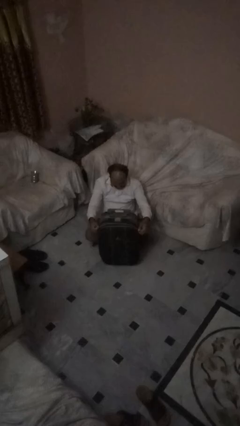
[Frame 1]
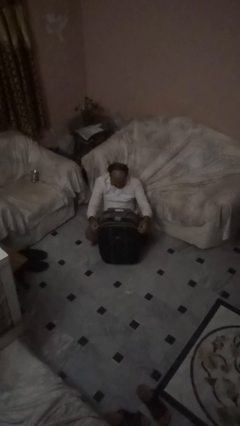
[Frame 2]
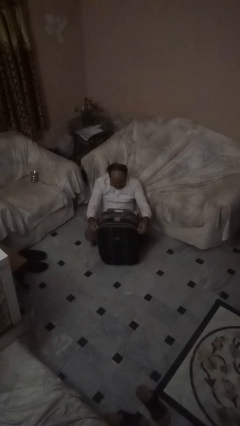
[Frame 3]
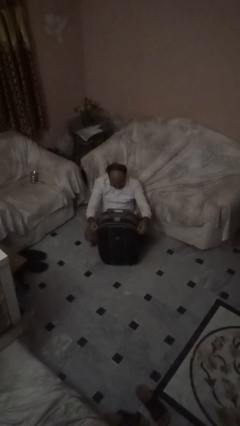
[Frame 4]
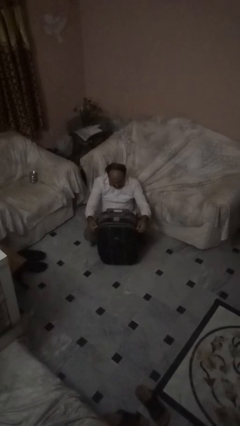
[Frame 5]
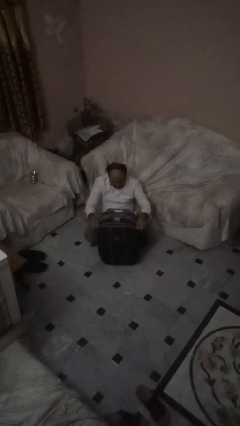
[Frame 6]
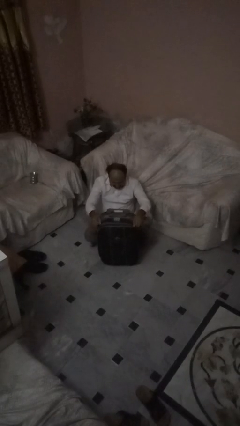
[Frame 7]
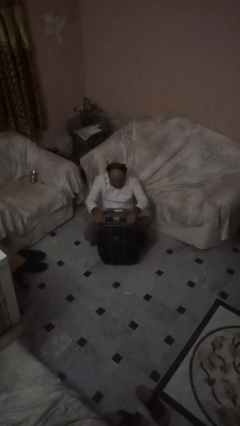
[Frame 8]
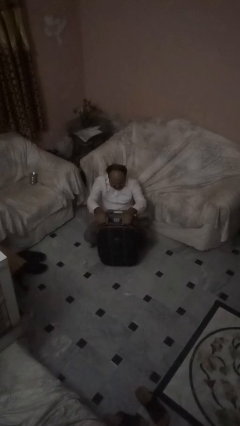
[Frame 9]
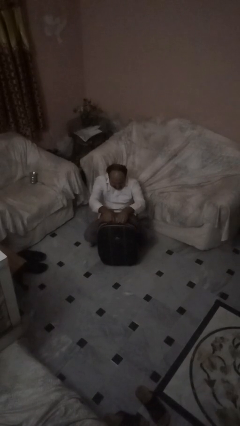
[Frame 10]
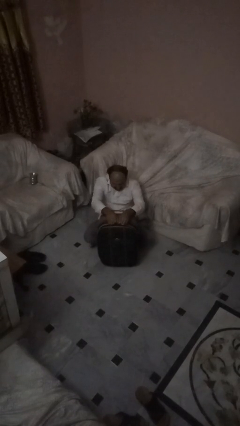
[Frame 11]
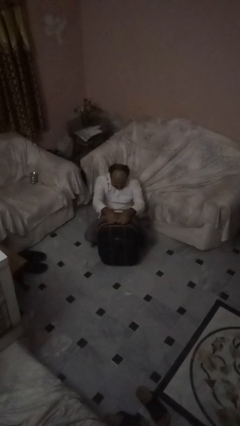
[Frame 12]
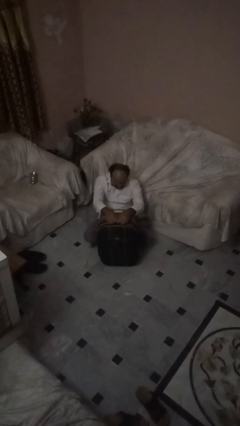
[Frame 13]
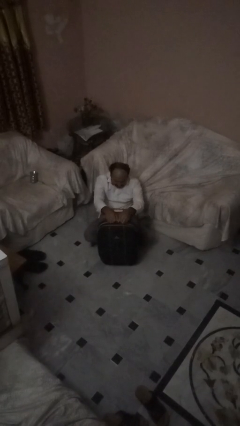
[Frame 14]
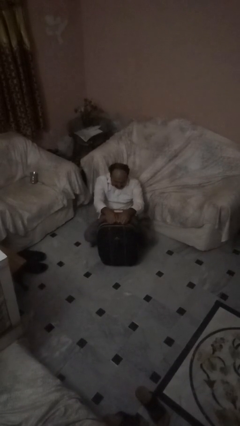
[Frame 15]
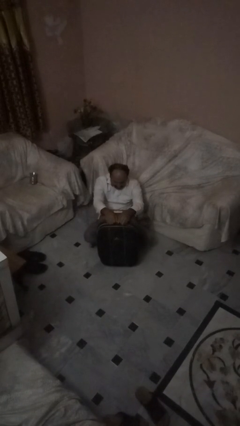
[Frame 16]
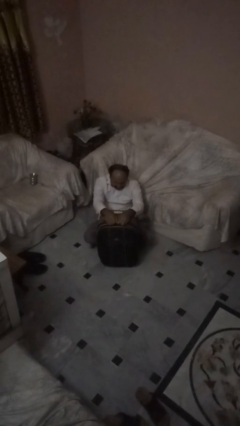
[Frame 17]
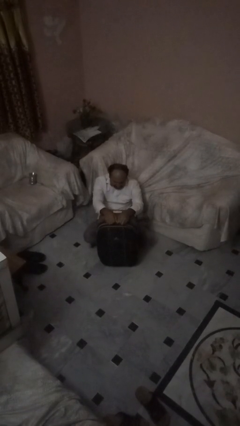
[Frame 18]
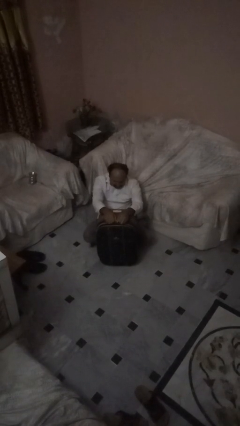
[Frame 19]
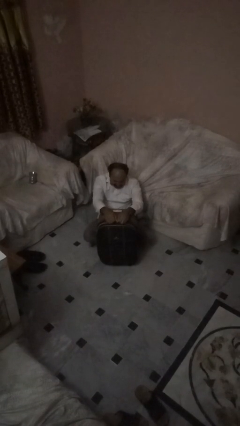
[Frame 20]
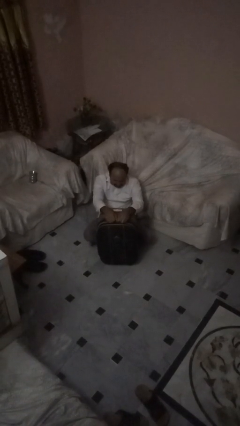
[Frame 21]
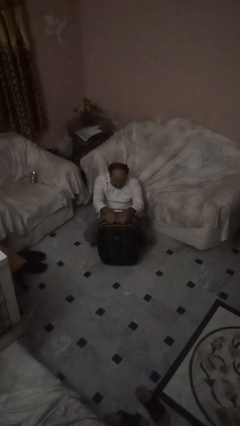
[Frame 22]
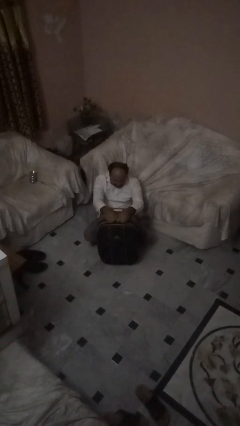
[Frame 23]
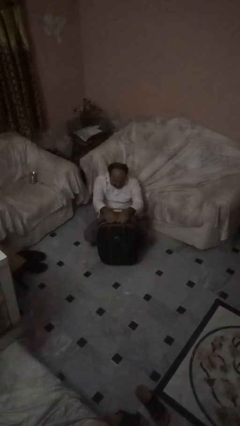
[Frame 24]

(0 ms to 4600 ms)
person closes suitcase

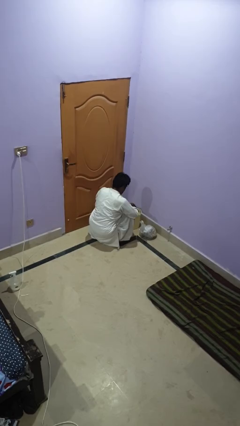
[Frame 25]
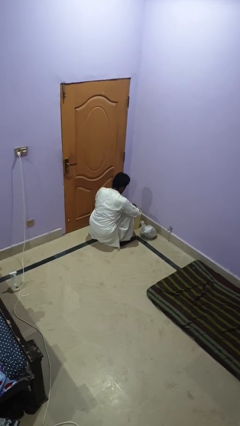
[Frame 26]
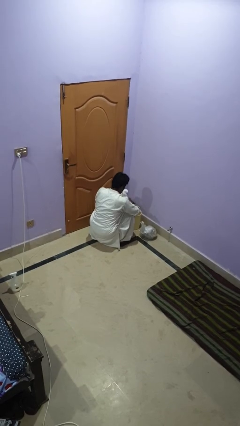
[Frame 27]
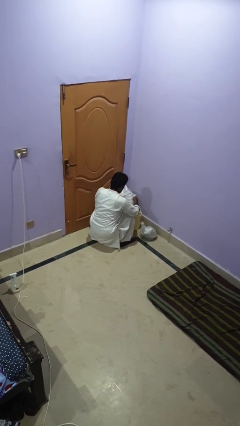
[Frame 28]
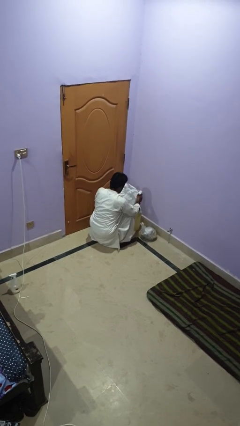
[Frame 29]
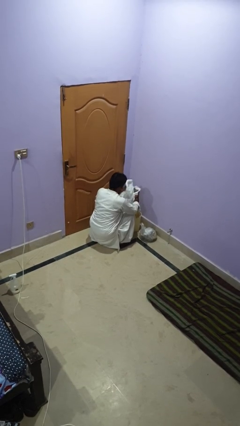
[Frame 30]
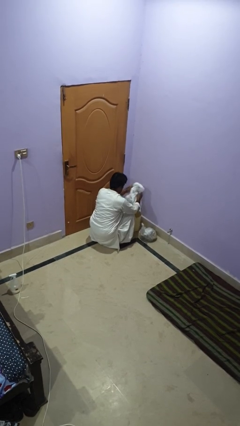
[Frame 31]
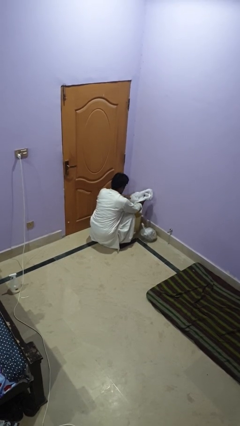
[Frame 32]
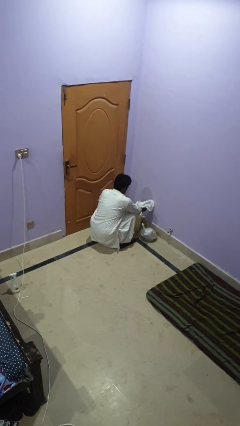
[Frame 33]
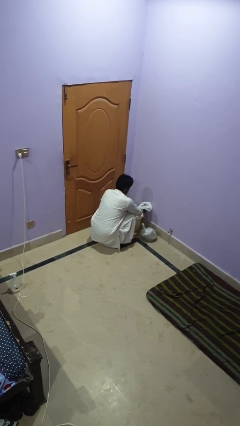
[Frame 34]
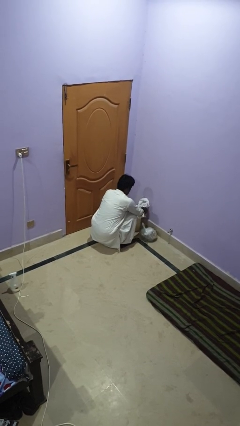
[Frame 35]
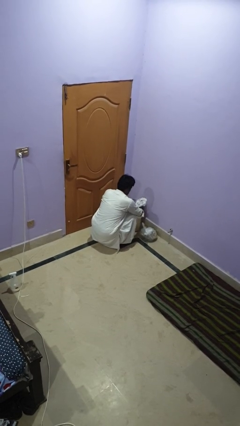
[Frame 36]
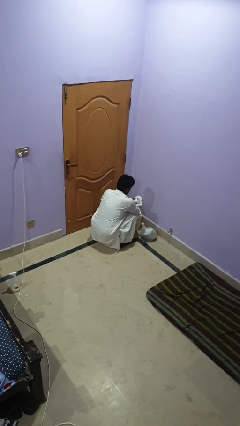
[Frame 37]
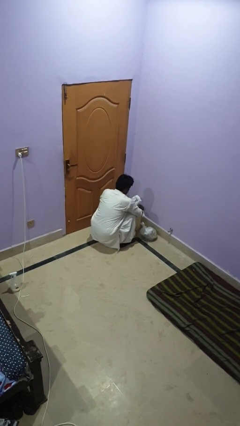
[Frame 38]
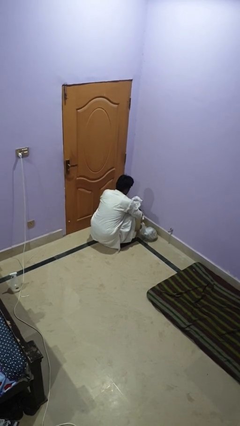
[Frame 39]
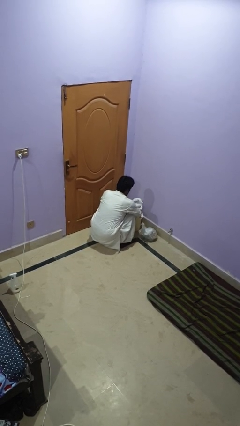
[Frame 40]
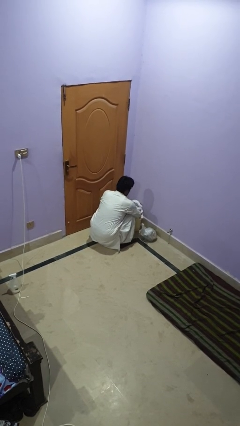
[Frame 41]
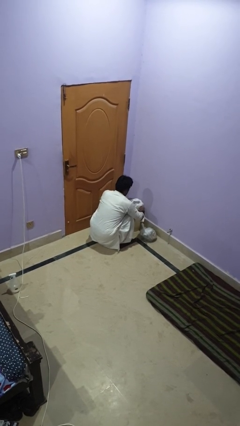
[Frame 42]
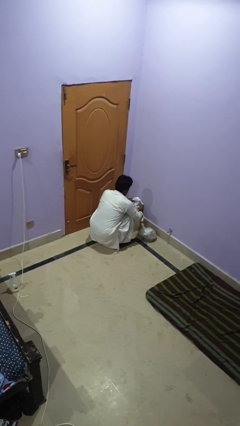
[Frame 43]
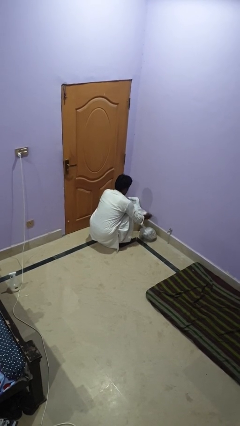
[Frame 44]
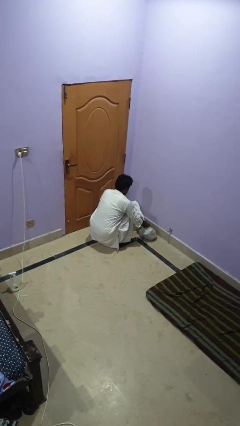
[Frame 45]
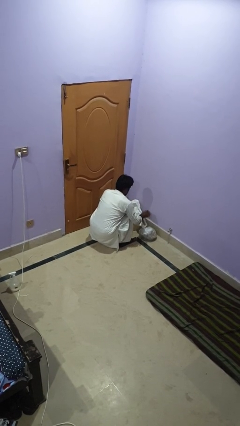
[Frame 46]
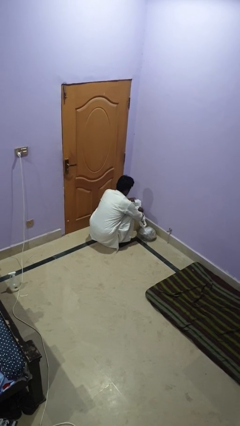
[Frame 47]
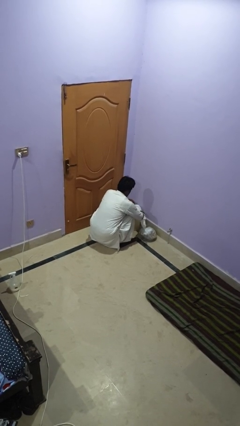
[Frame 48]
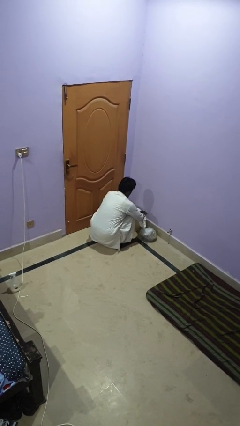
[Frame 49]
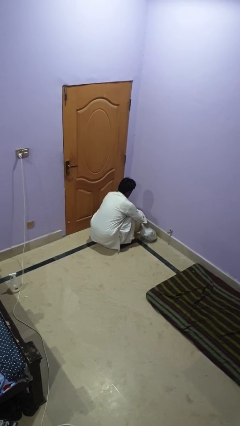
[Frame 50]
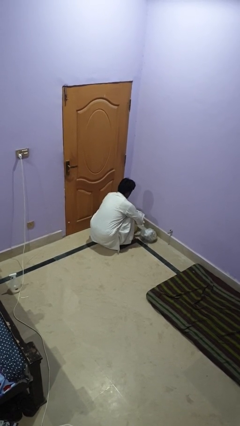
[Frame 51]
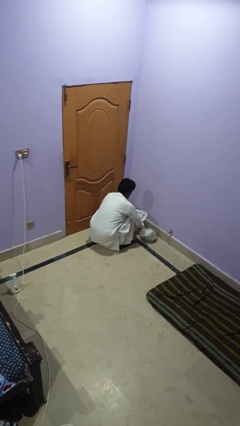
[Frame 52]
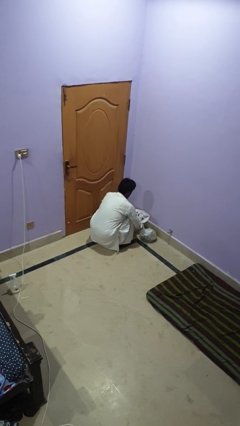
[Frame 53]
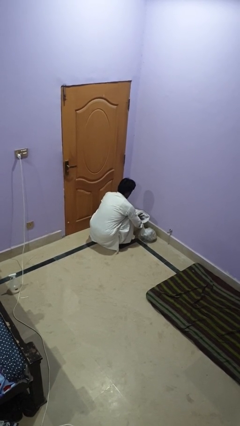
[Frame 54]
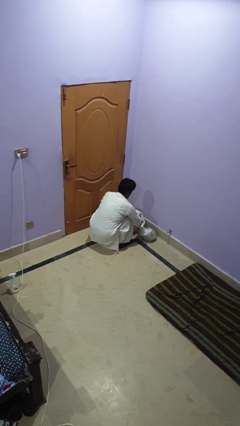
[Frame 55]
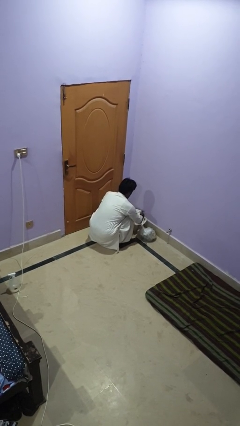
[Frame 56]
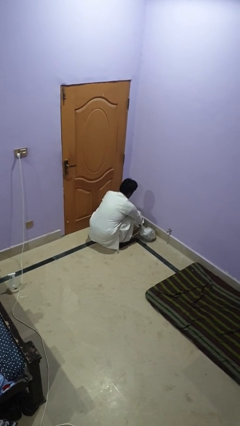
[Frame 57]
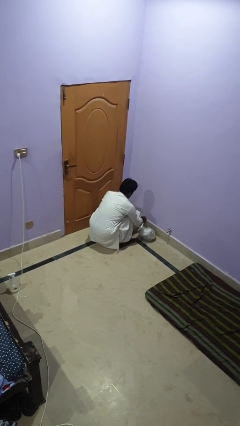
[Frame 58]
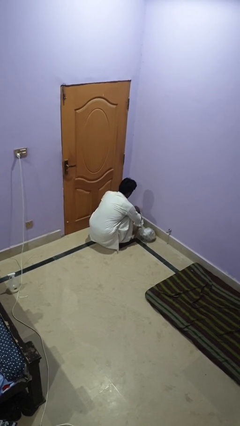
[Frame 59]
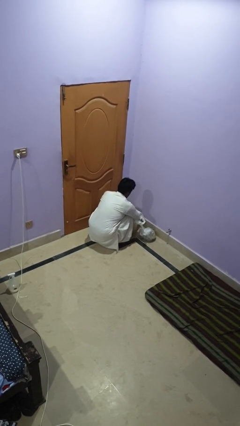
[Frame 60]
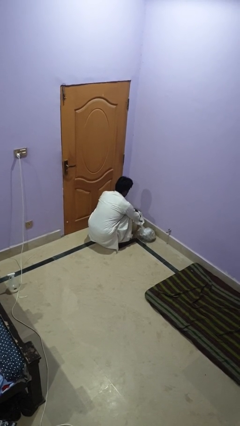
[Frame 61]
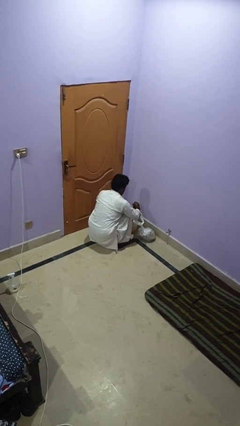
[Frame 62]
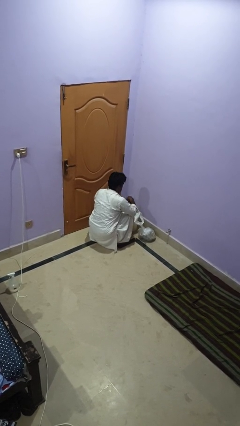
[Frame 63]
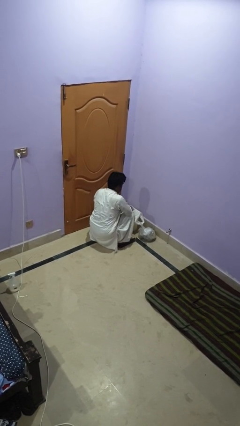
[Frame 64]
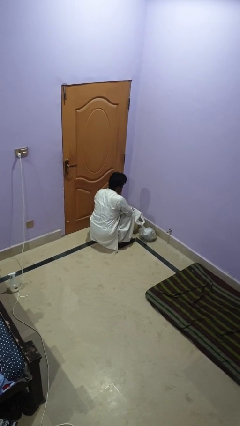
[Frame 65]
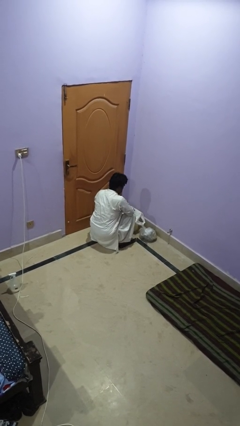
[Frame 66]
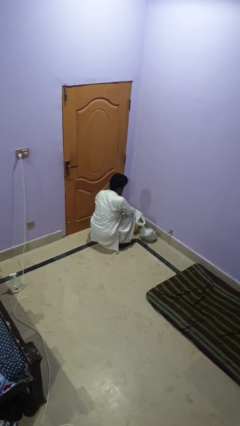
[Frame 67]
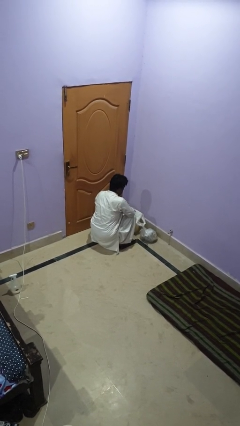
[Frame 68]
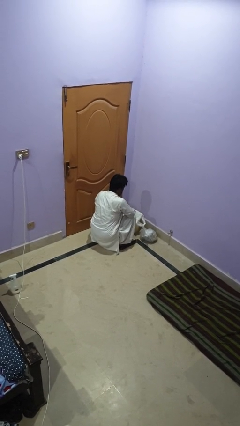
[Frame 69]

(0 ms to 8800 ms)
person inserts trashbag into trashcan

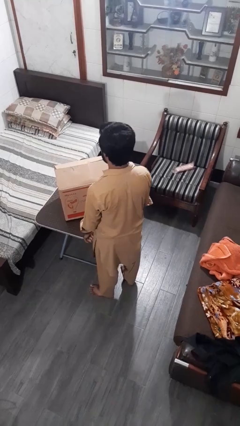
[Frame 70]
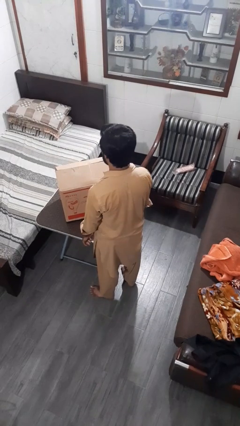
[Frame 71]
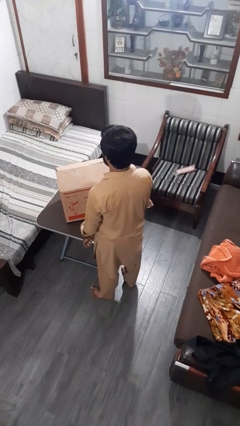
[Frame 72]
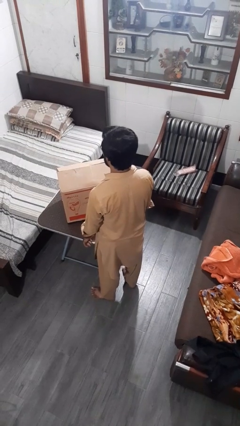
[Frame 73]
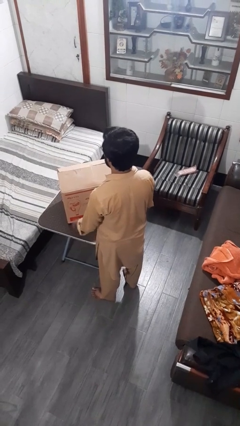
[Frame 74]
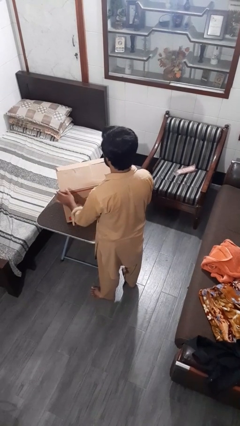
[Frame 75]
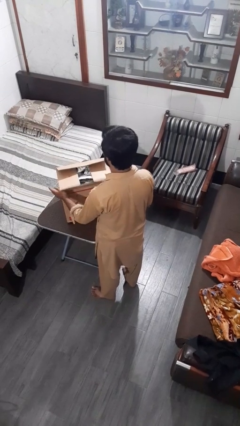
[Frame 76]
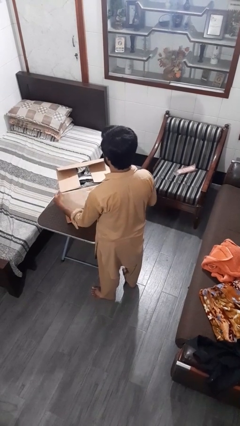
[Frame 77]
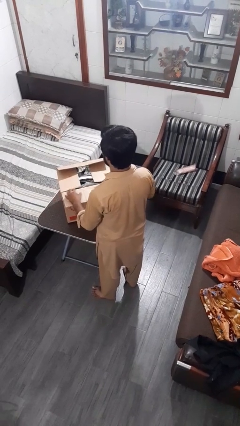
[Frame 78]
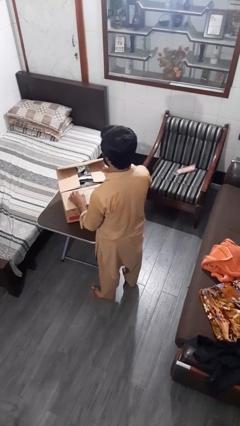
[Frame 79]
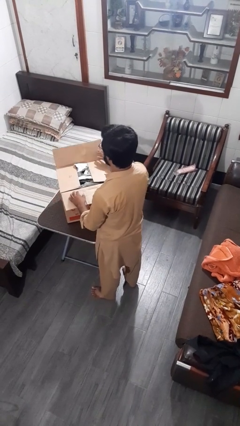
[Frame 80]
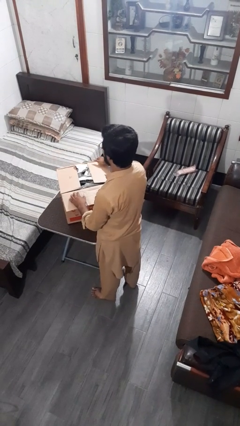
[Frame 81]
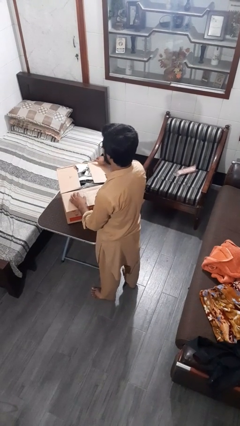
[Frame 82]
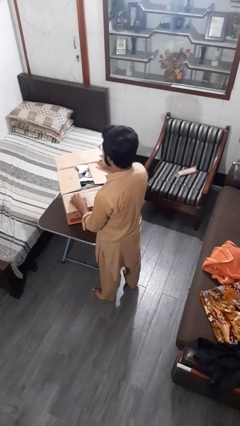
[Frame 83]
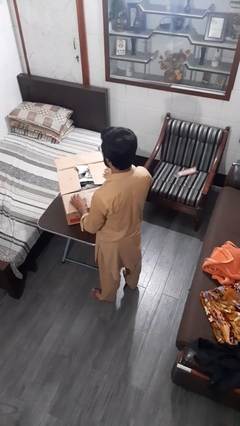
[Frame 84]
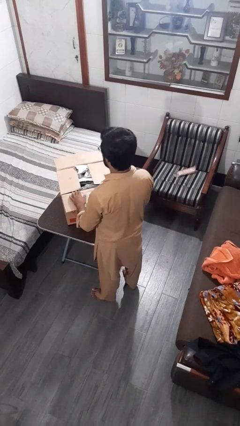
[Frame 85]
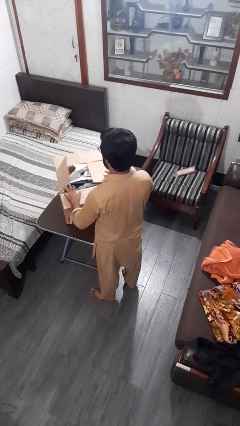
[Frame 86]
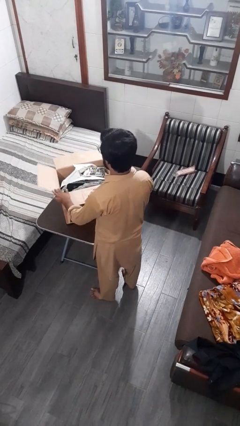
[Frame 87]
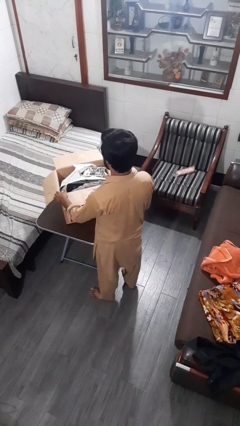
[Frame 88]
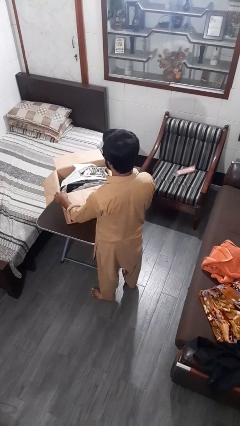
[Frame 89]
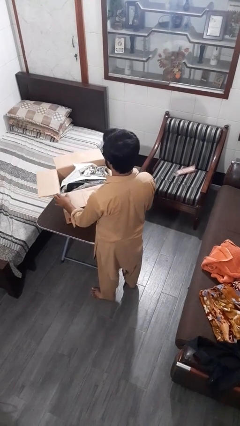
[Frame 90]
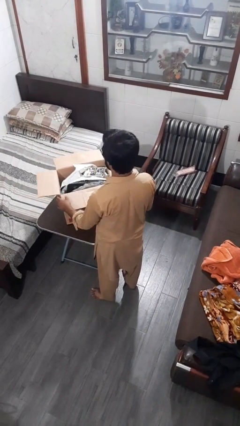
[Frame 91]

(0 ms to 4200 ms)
person opens box
